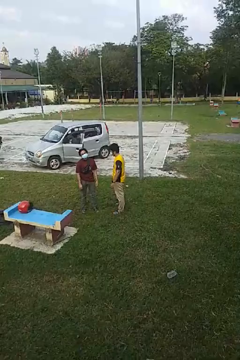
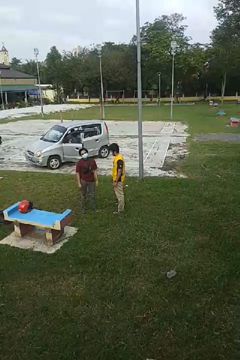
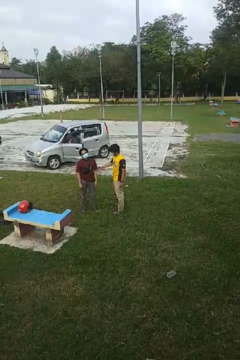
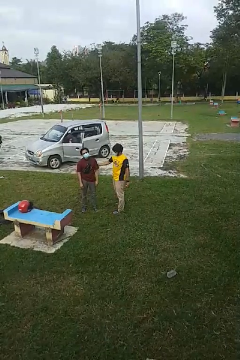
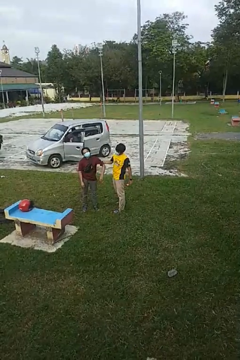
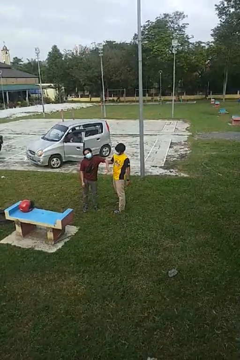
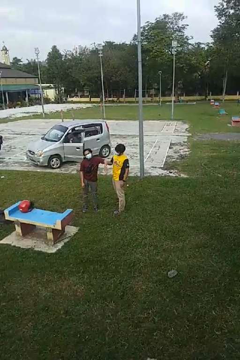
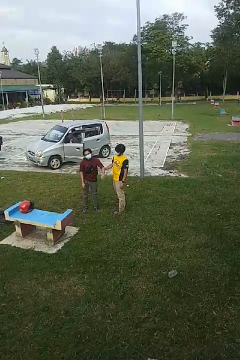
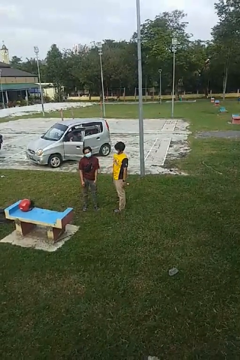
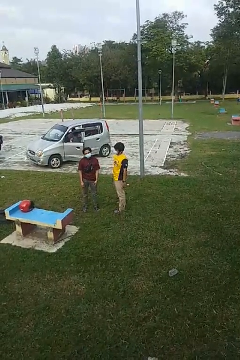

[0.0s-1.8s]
person grabs person by bicep

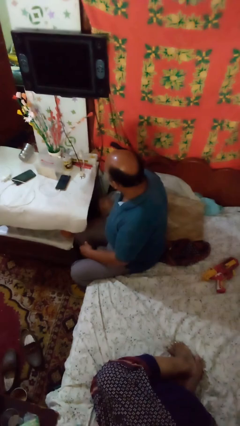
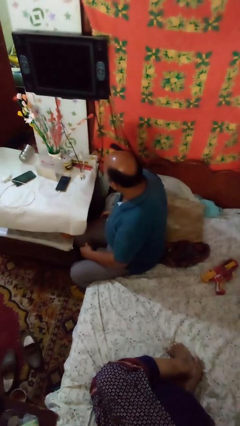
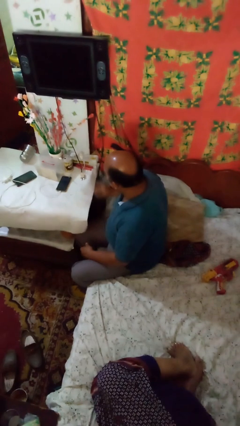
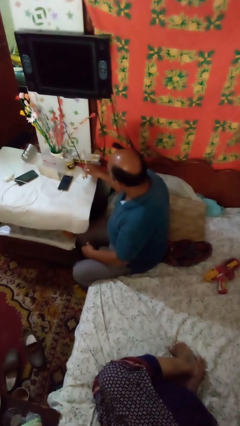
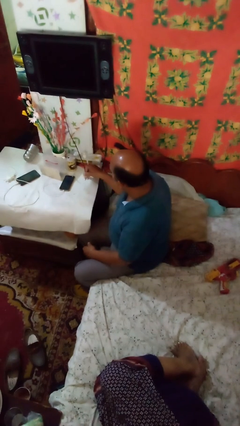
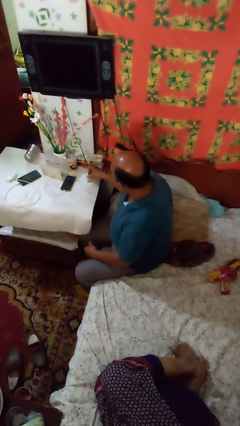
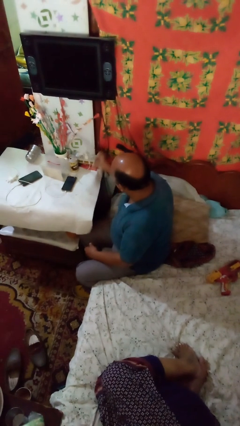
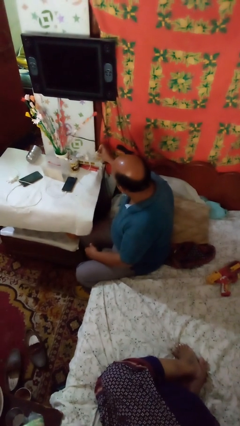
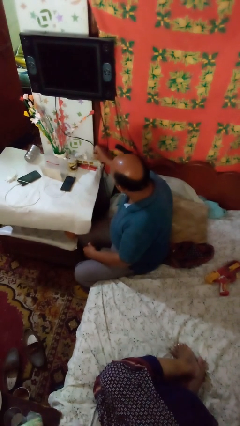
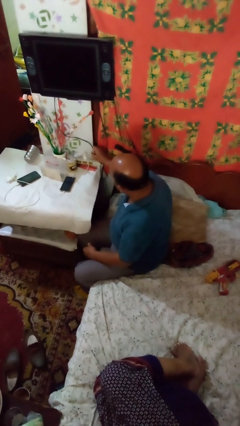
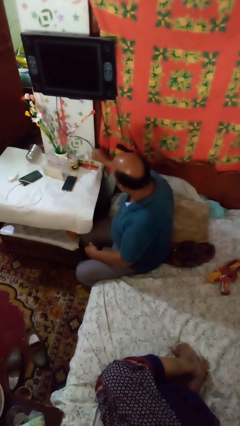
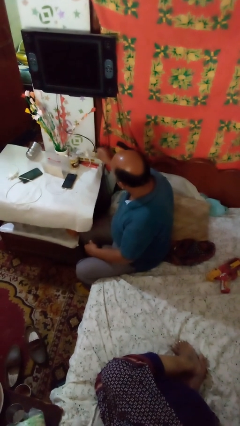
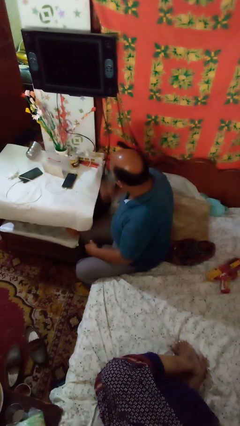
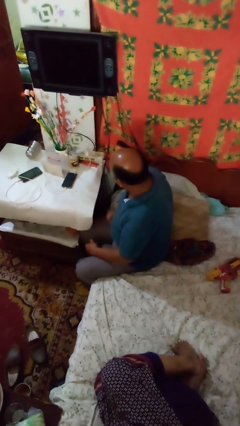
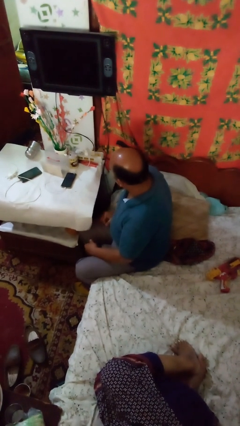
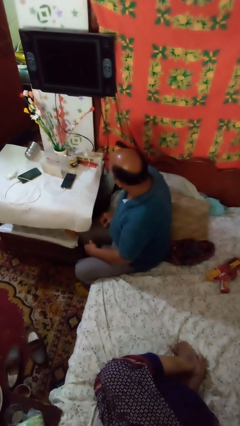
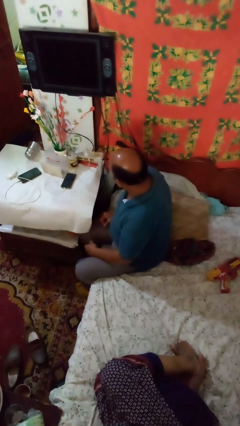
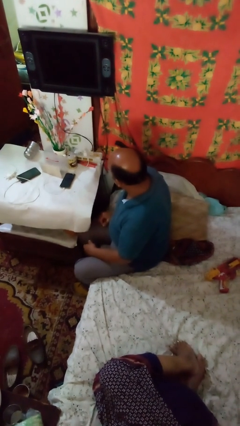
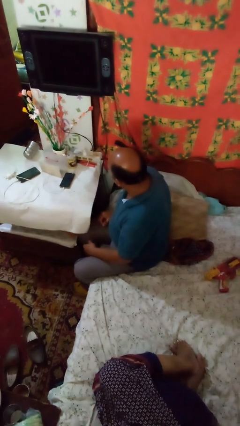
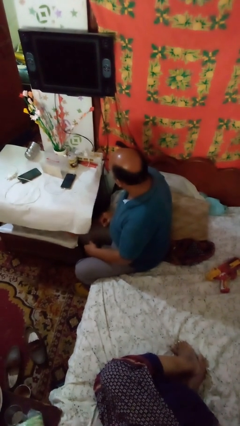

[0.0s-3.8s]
person plugs into electrical socket

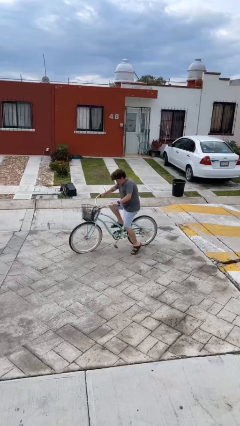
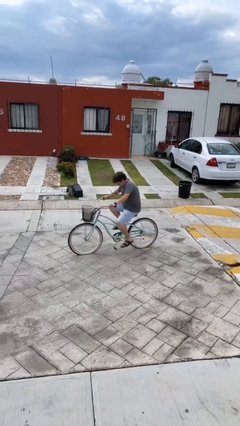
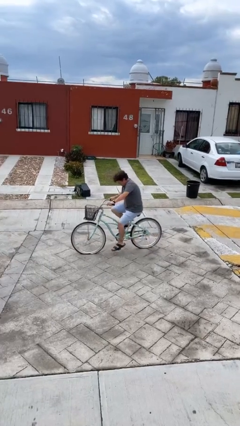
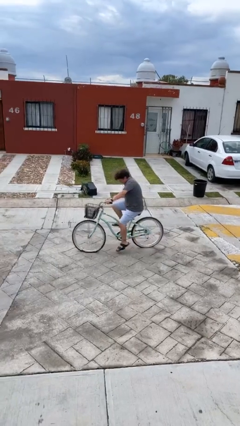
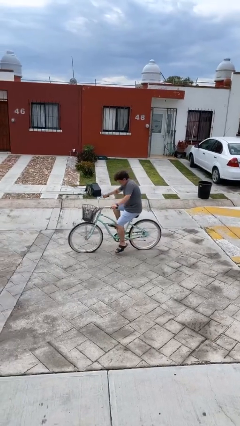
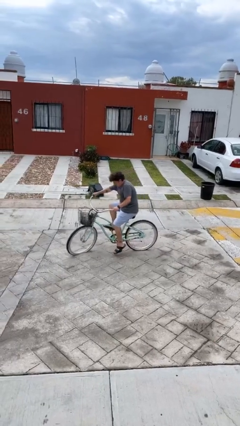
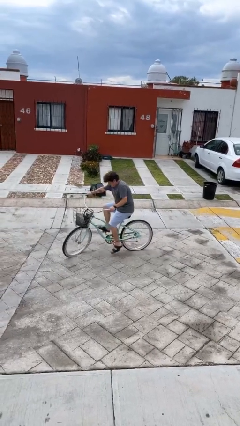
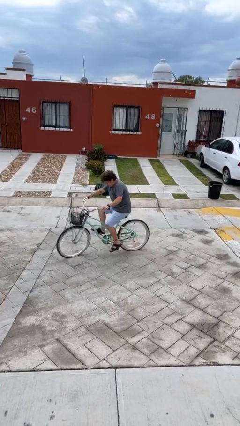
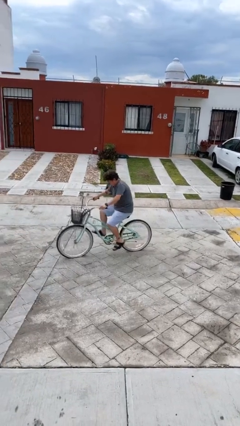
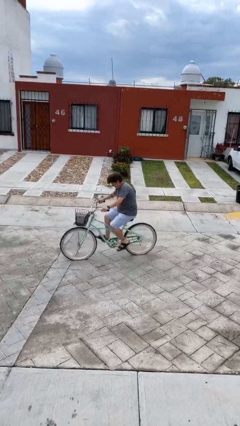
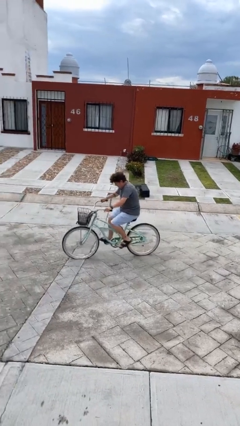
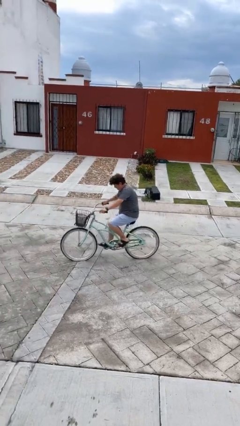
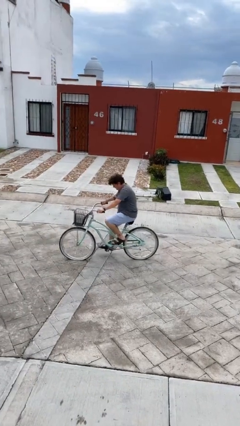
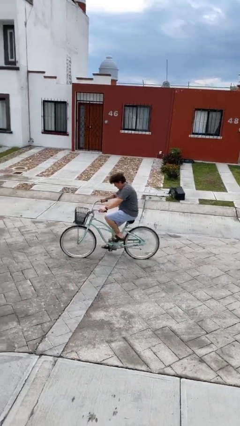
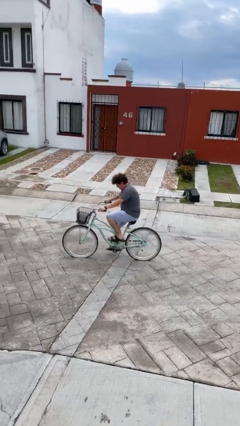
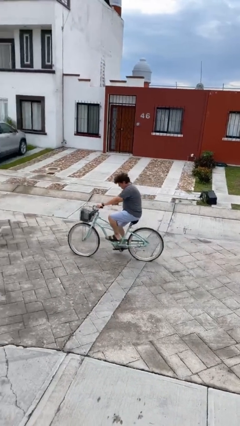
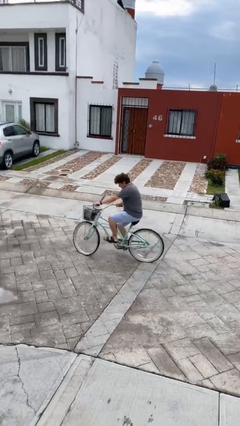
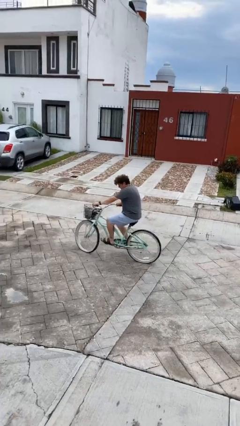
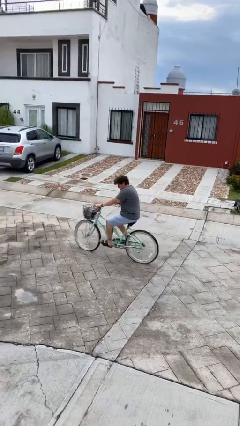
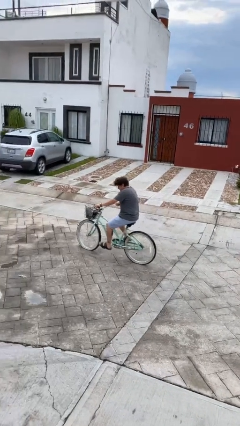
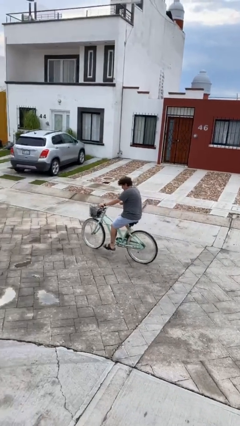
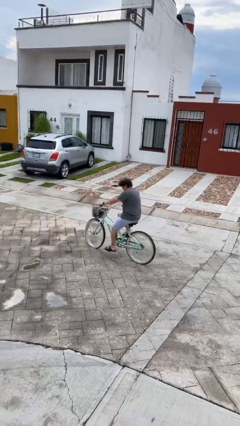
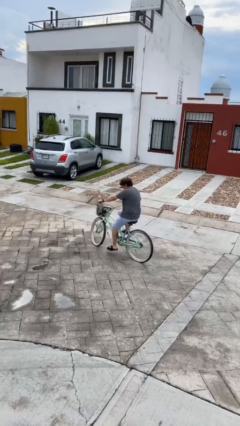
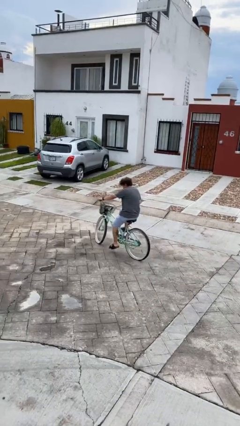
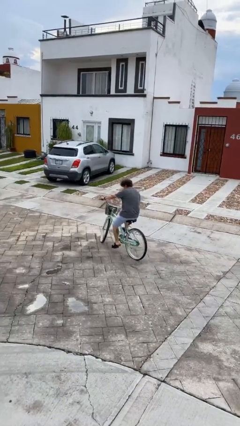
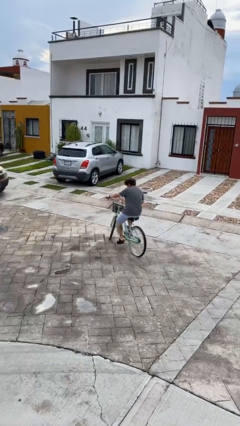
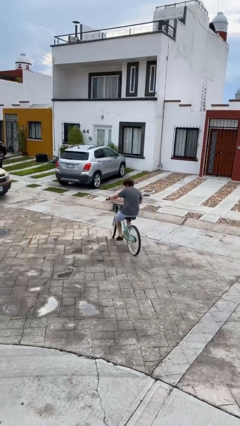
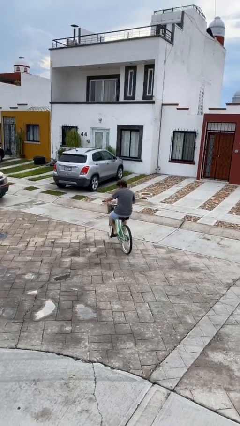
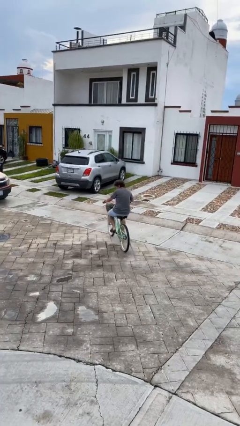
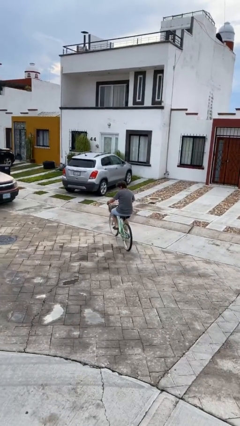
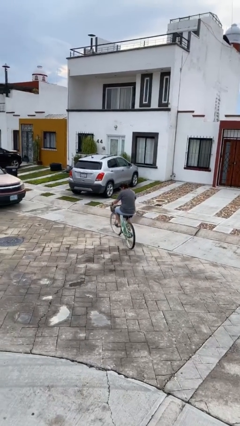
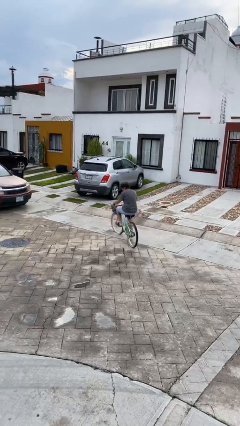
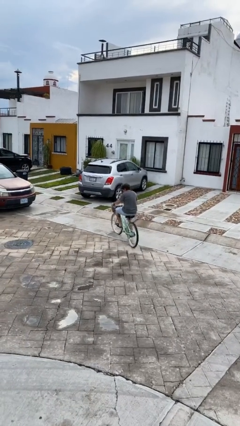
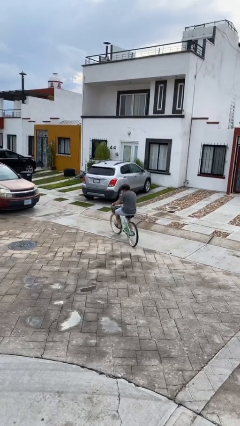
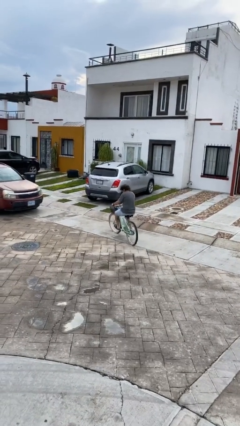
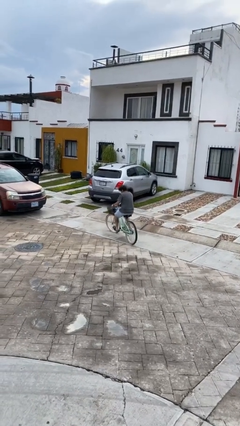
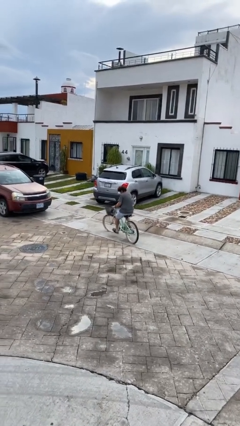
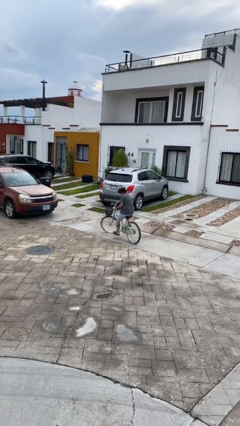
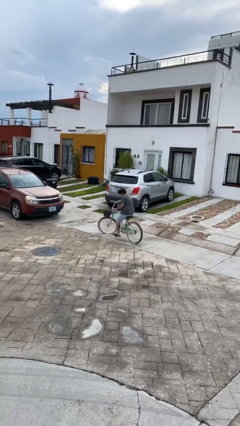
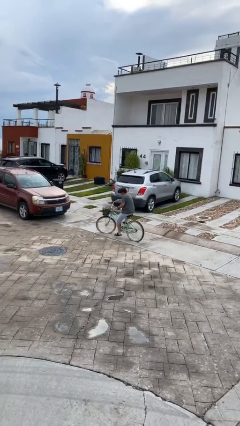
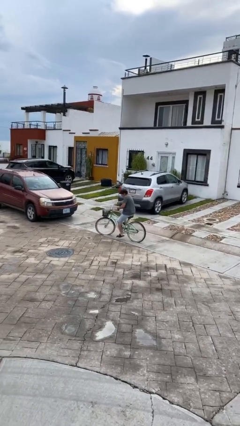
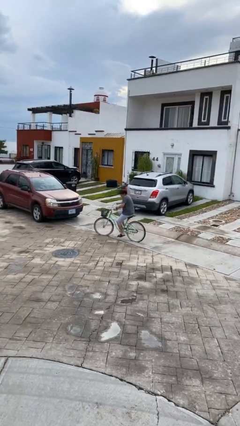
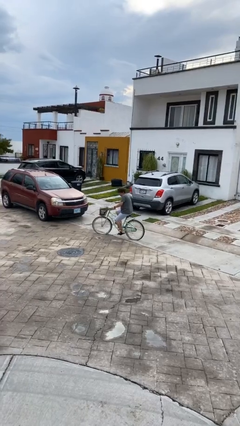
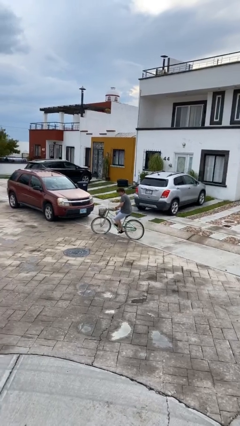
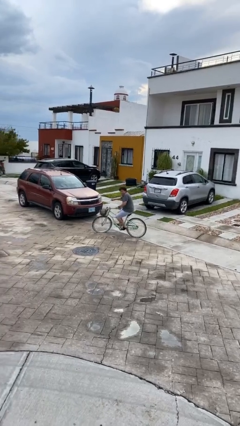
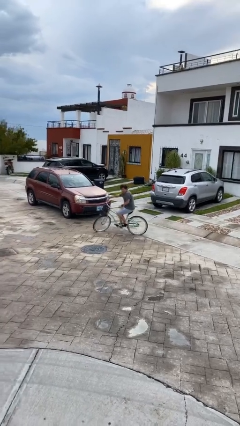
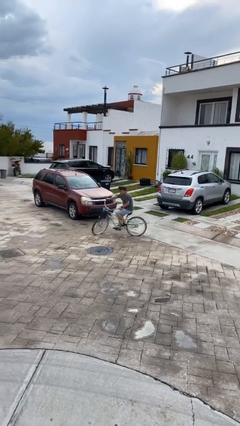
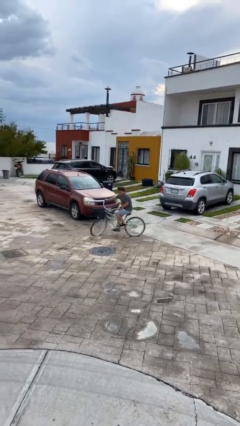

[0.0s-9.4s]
person rides bicycle

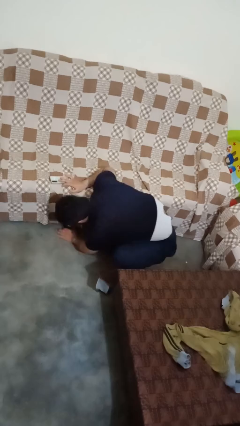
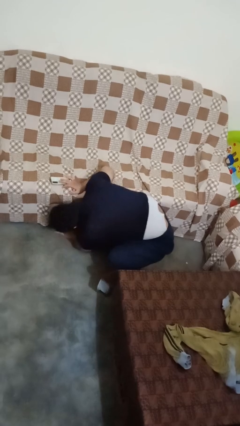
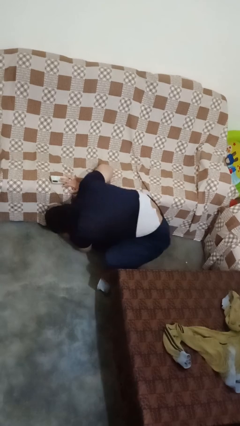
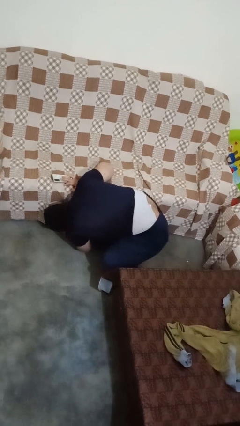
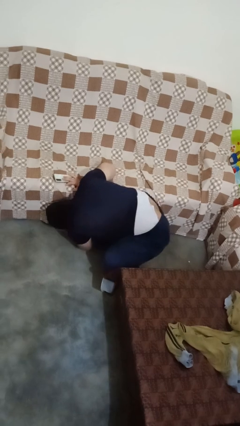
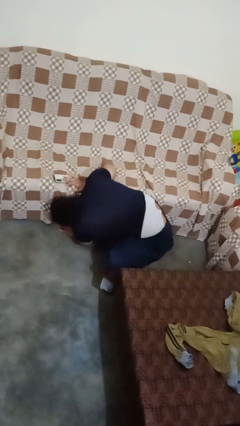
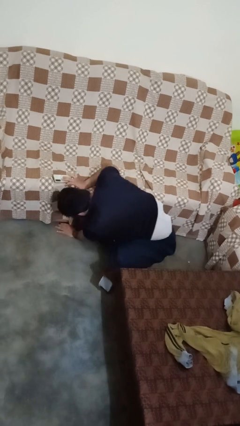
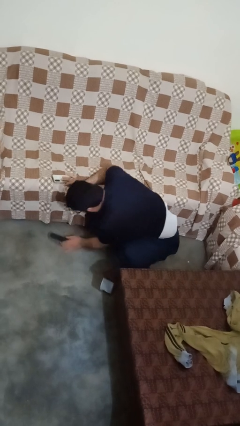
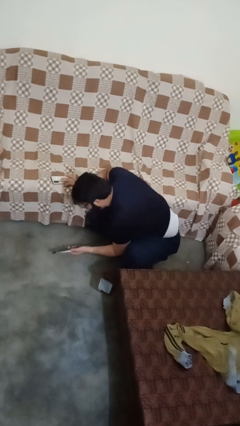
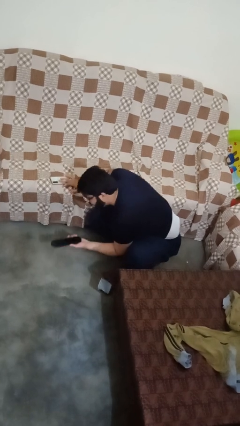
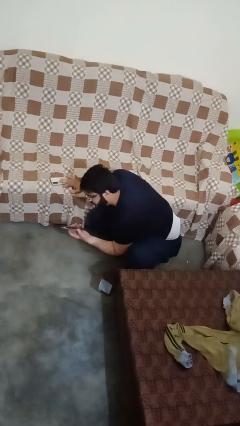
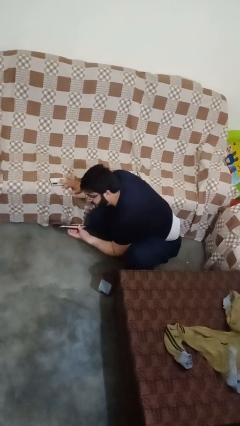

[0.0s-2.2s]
person searches under couch

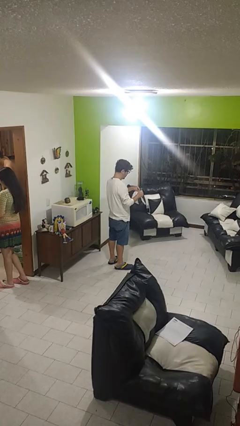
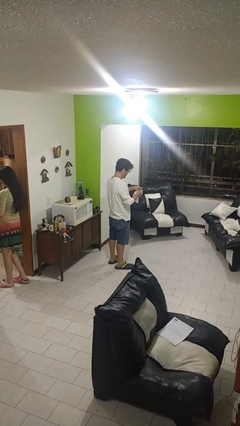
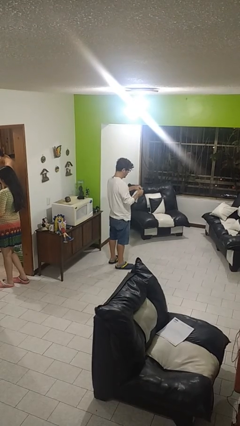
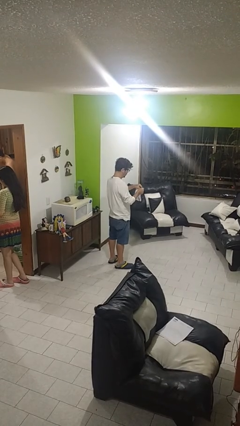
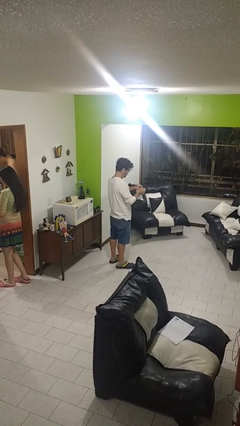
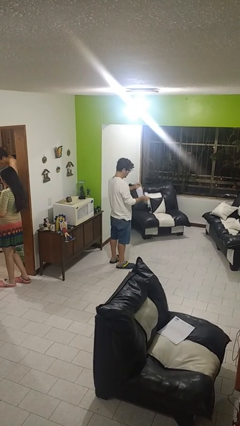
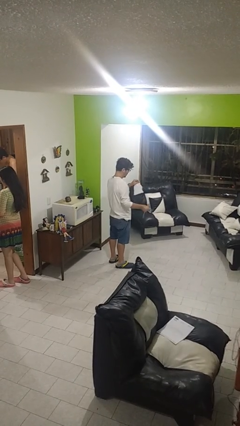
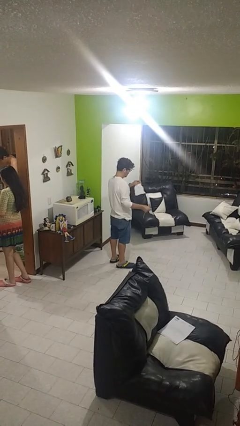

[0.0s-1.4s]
person tears paper
